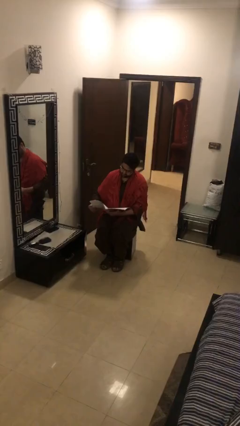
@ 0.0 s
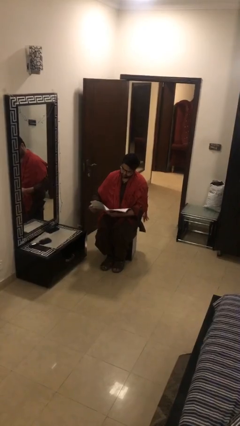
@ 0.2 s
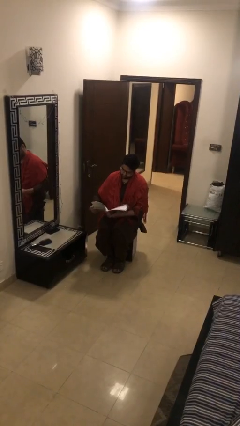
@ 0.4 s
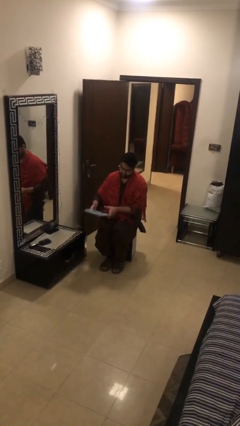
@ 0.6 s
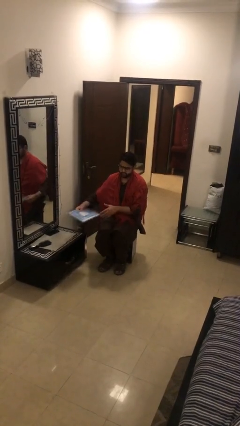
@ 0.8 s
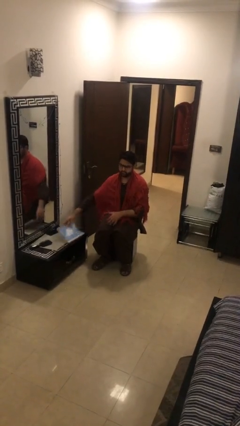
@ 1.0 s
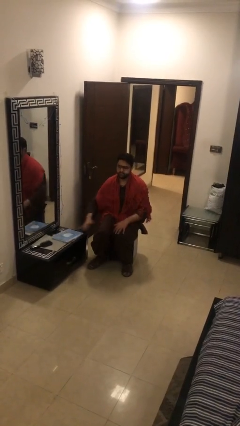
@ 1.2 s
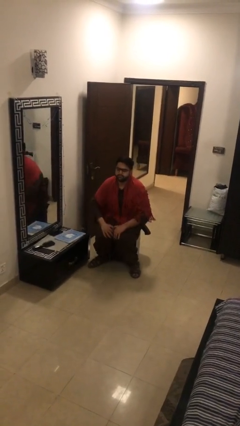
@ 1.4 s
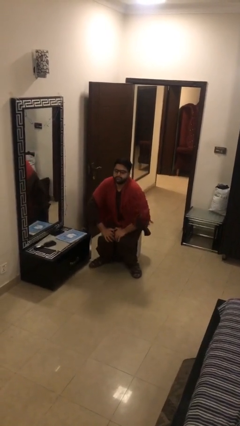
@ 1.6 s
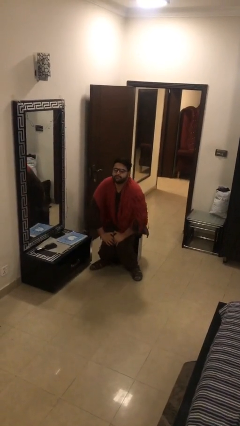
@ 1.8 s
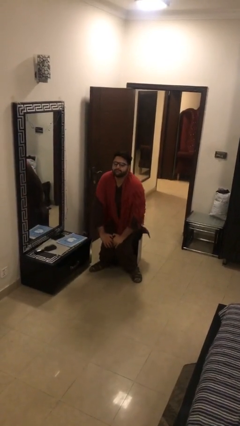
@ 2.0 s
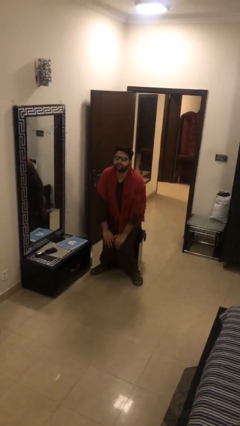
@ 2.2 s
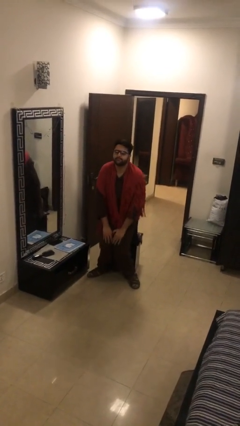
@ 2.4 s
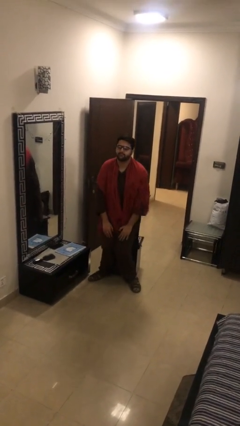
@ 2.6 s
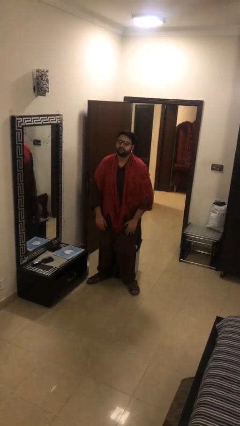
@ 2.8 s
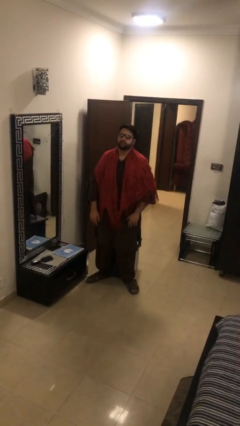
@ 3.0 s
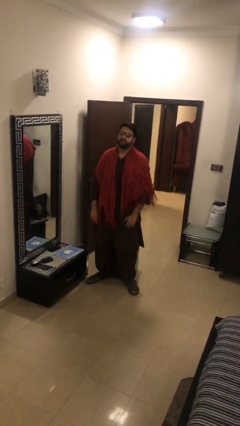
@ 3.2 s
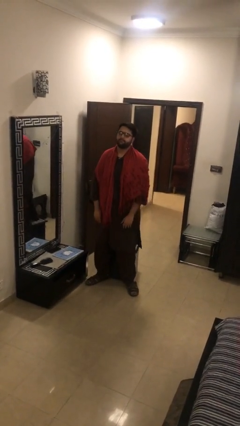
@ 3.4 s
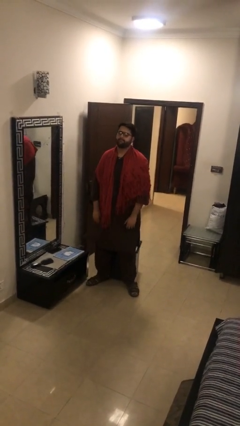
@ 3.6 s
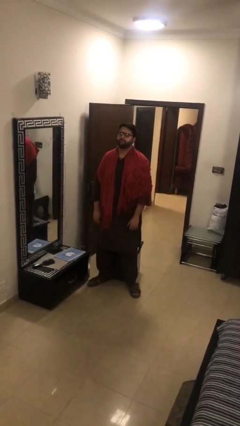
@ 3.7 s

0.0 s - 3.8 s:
person stands up

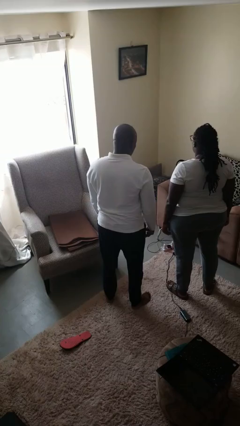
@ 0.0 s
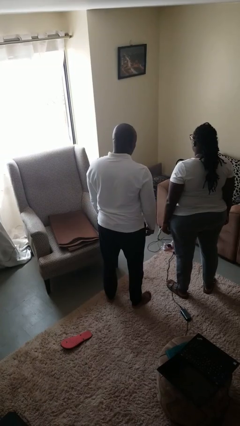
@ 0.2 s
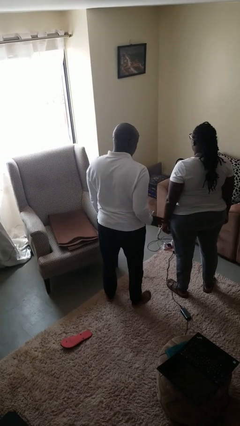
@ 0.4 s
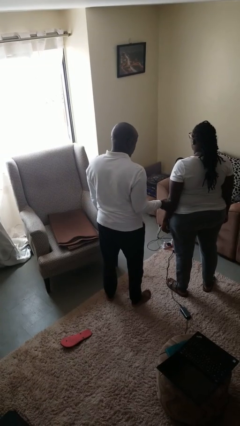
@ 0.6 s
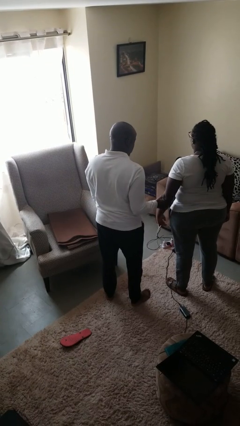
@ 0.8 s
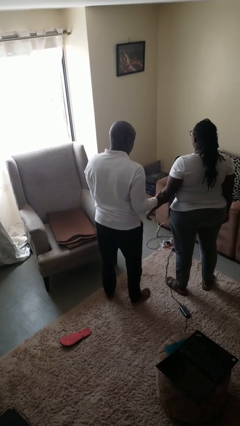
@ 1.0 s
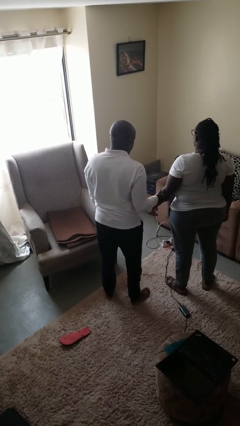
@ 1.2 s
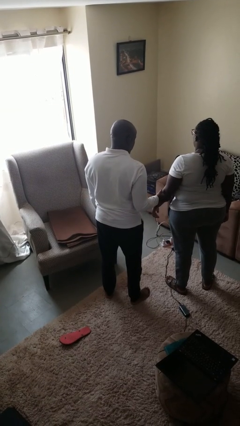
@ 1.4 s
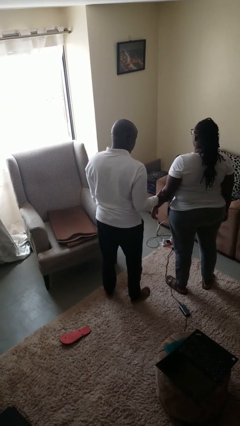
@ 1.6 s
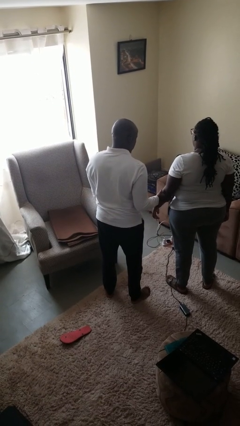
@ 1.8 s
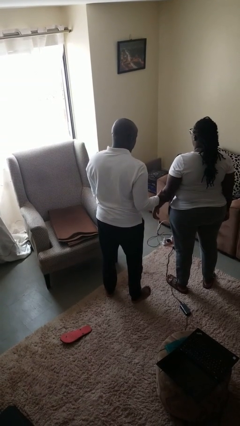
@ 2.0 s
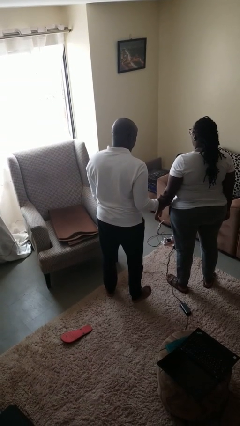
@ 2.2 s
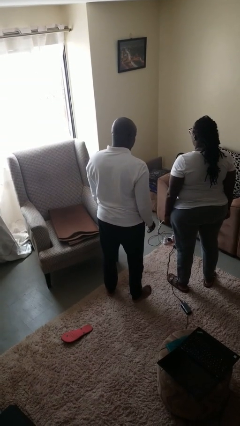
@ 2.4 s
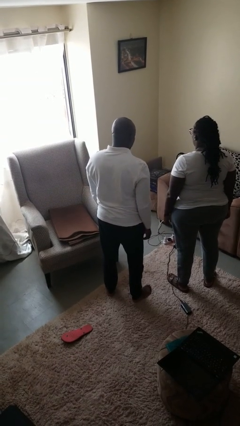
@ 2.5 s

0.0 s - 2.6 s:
person grabs person by forearm

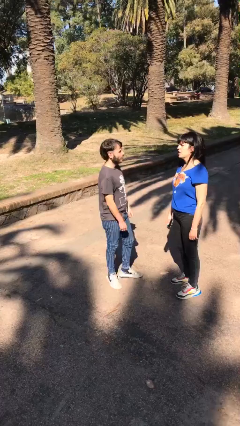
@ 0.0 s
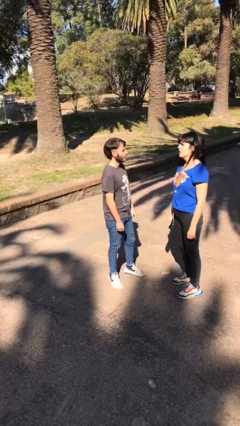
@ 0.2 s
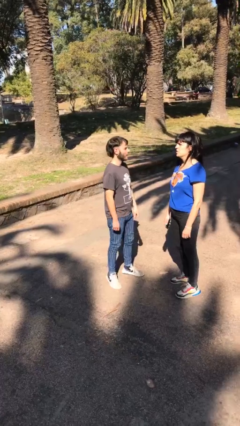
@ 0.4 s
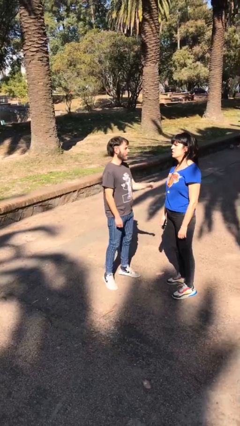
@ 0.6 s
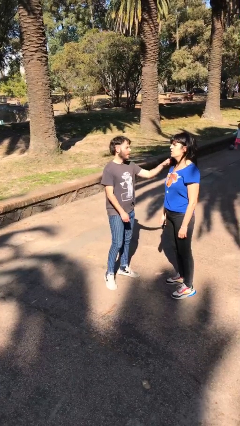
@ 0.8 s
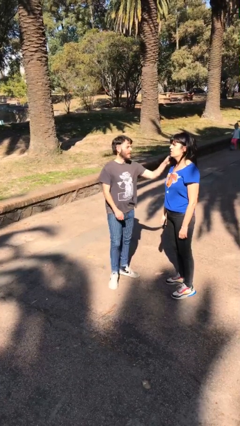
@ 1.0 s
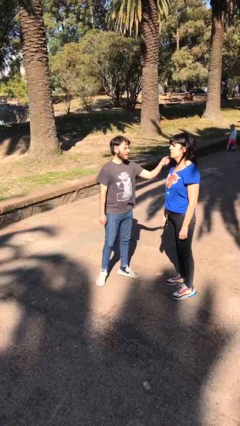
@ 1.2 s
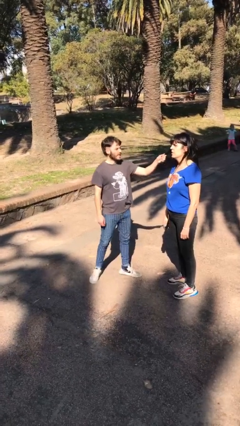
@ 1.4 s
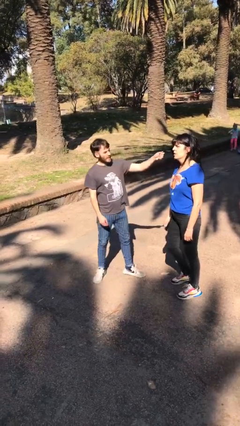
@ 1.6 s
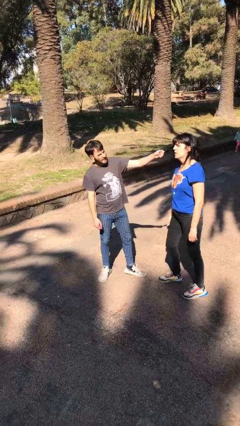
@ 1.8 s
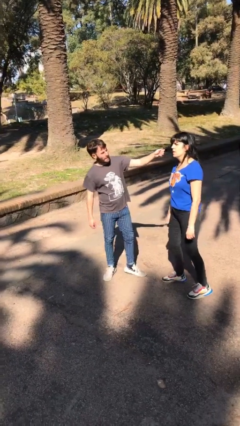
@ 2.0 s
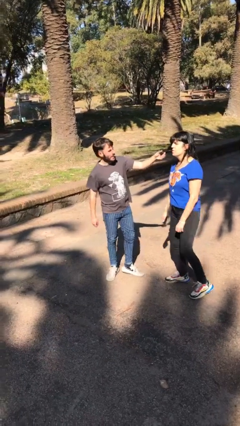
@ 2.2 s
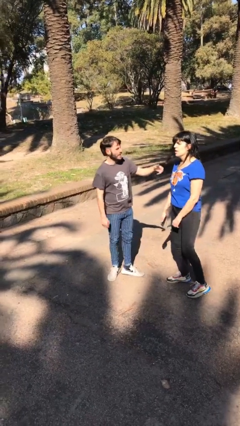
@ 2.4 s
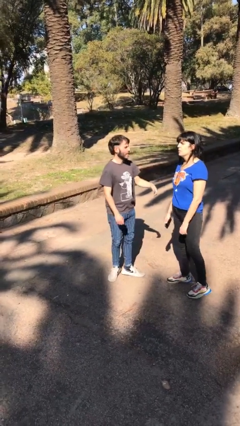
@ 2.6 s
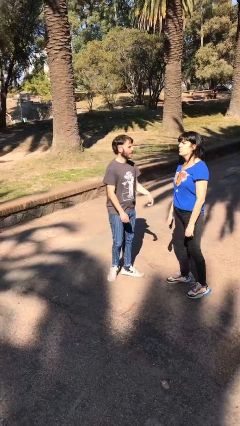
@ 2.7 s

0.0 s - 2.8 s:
person grabs person by hair

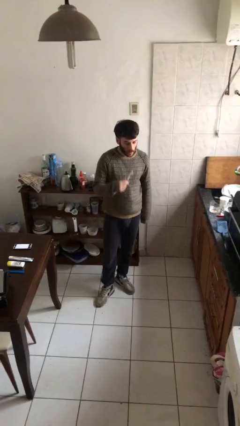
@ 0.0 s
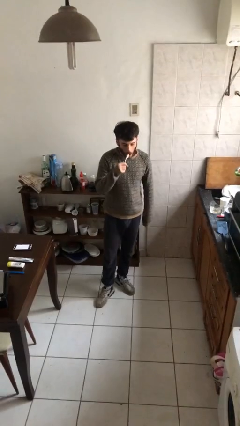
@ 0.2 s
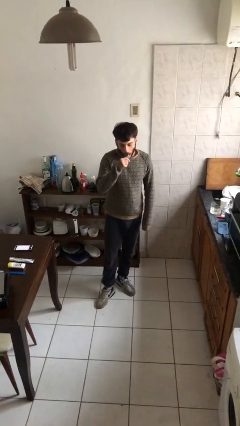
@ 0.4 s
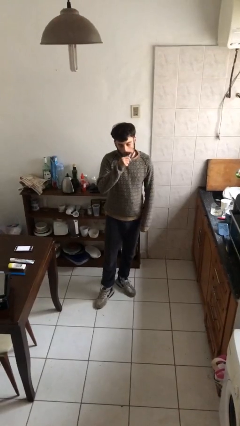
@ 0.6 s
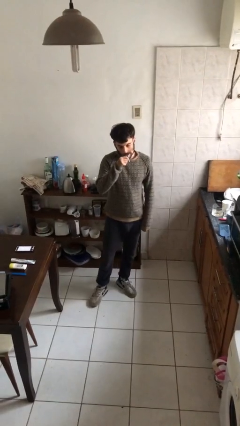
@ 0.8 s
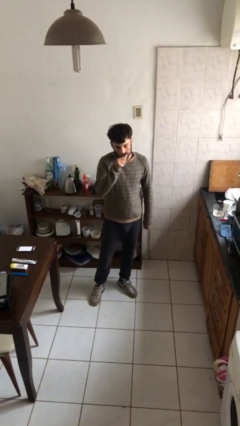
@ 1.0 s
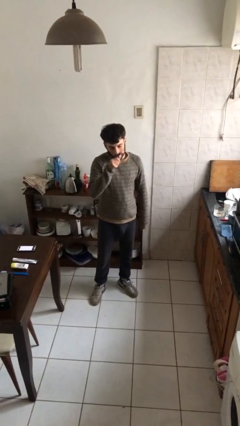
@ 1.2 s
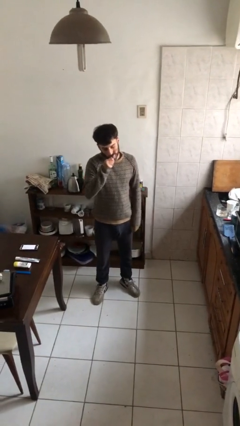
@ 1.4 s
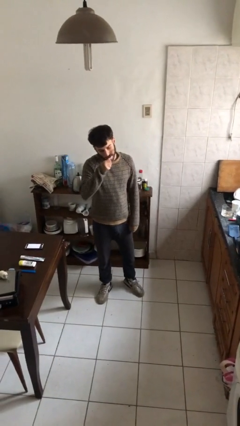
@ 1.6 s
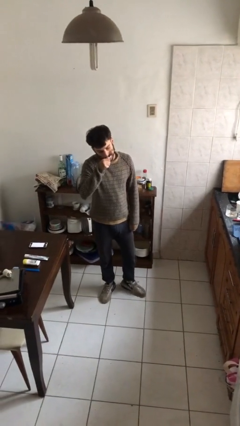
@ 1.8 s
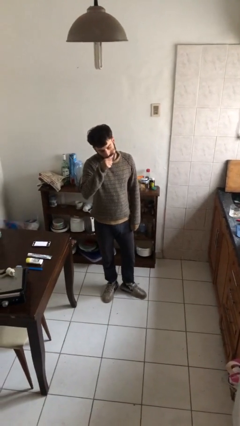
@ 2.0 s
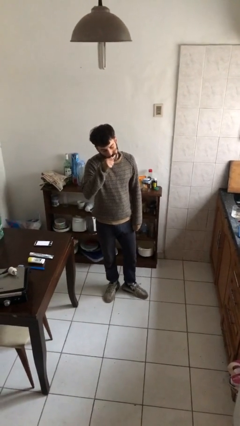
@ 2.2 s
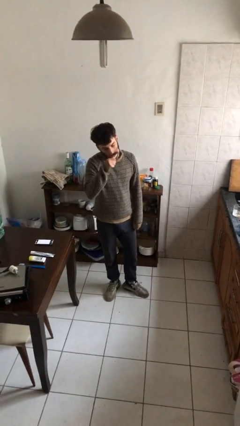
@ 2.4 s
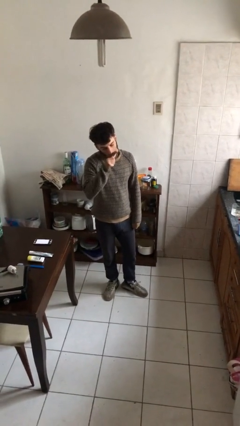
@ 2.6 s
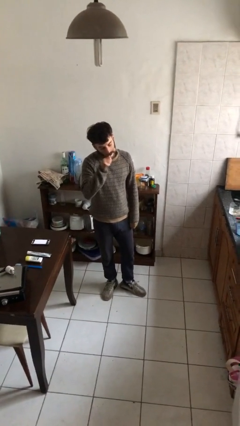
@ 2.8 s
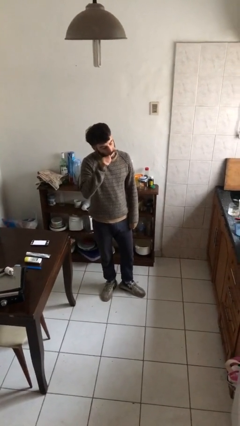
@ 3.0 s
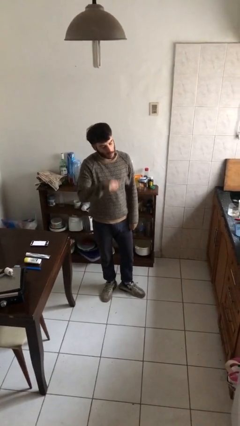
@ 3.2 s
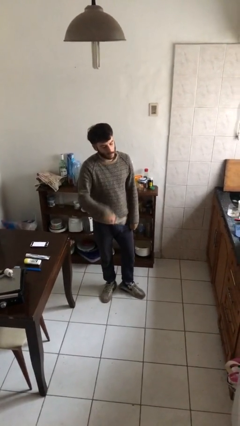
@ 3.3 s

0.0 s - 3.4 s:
person brushes teeth

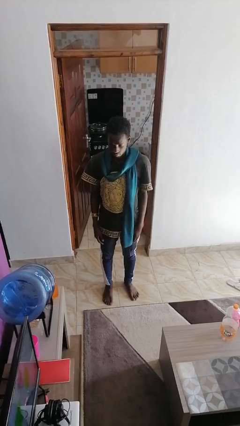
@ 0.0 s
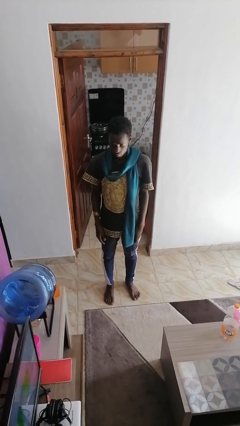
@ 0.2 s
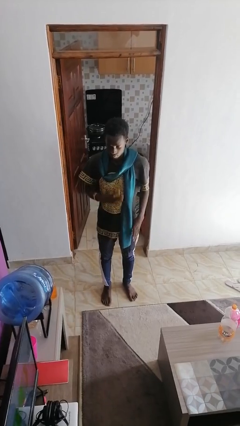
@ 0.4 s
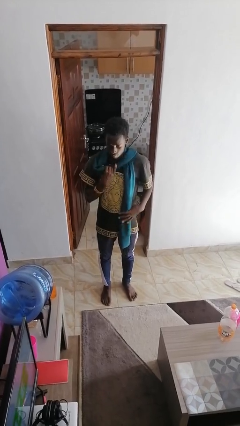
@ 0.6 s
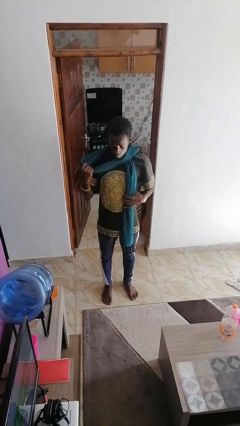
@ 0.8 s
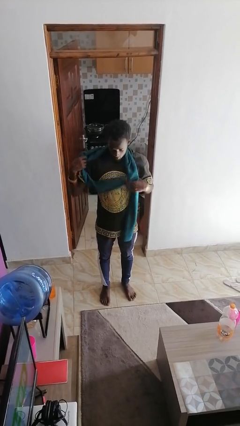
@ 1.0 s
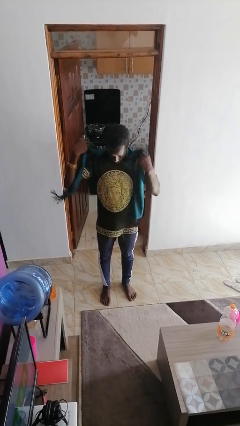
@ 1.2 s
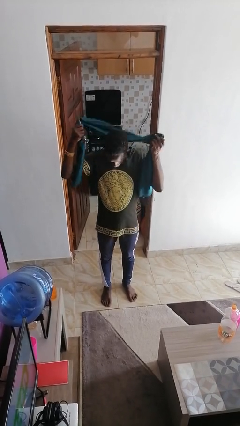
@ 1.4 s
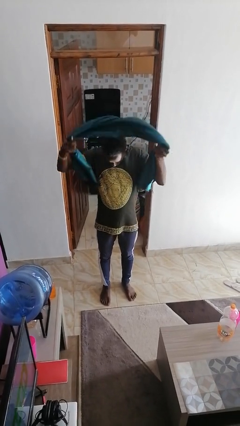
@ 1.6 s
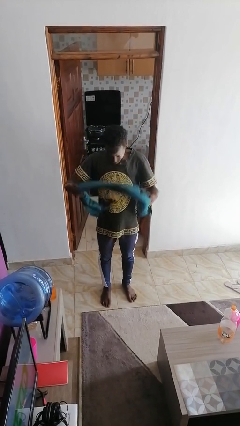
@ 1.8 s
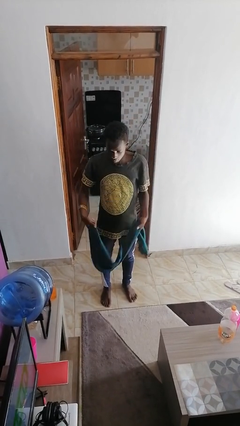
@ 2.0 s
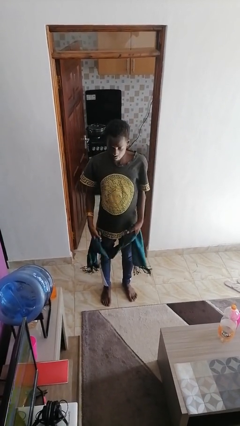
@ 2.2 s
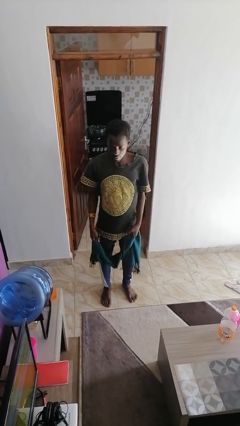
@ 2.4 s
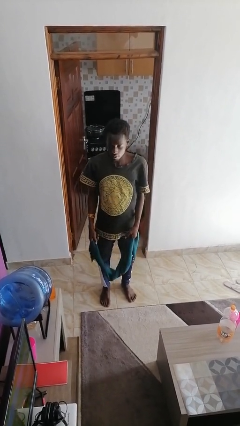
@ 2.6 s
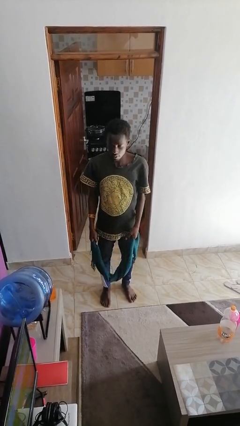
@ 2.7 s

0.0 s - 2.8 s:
person takes off scarf

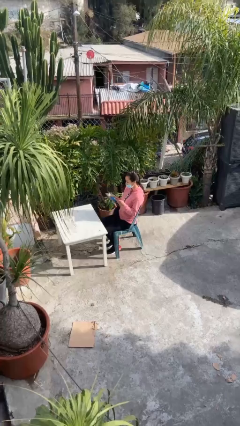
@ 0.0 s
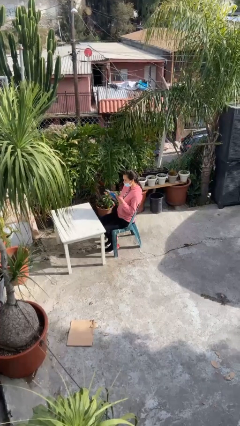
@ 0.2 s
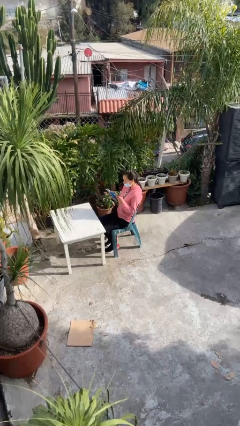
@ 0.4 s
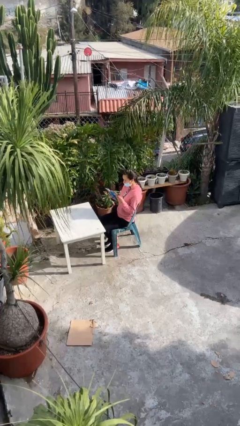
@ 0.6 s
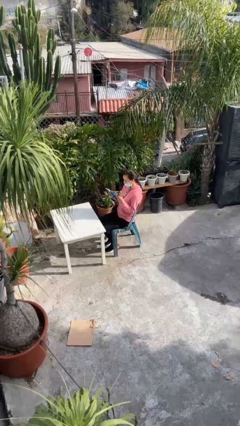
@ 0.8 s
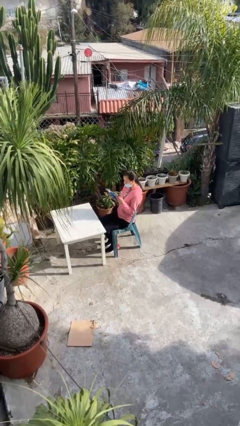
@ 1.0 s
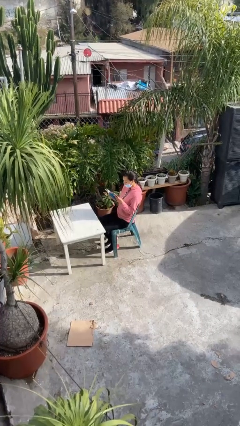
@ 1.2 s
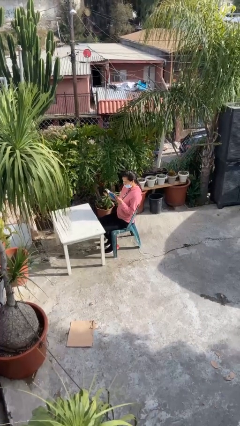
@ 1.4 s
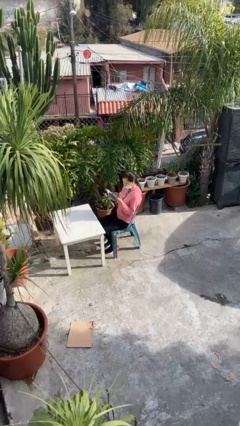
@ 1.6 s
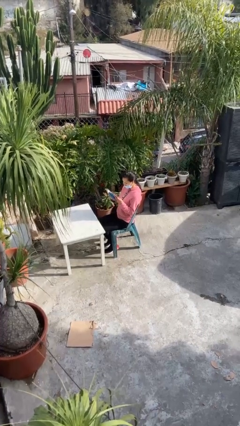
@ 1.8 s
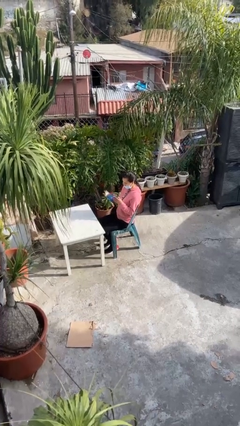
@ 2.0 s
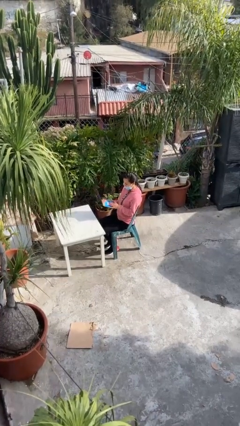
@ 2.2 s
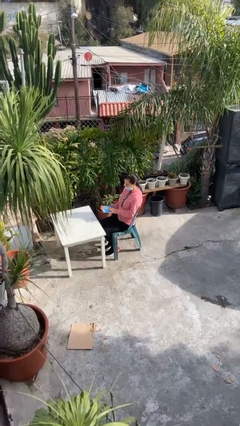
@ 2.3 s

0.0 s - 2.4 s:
person reads document
